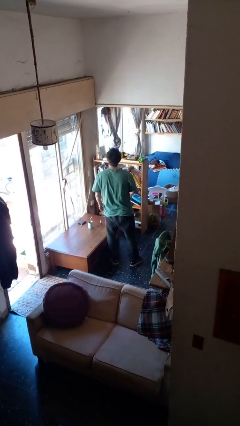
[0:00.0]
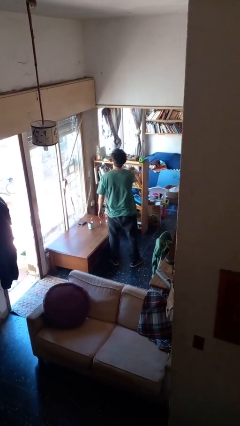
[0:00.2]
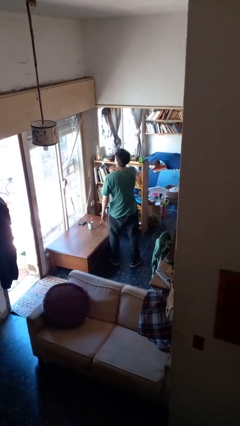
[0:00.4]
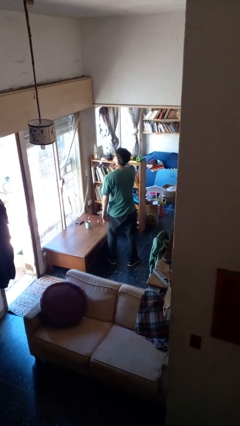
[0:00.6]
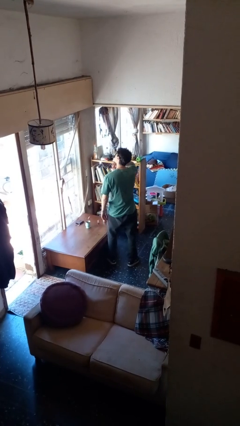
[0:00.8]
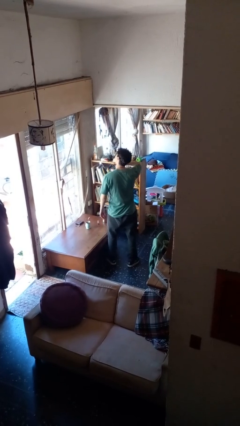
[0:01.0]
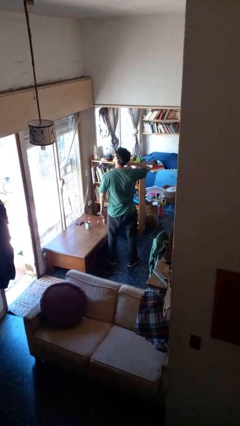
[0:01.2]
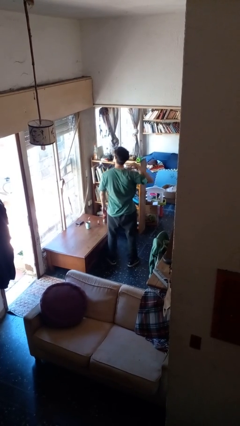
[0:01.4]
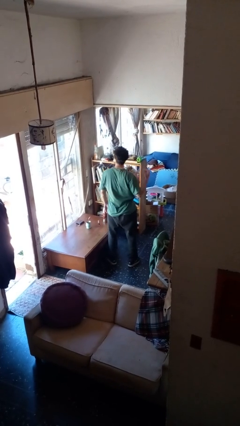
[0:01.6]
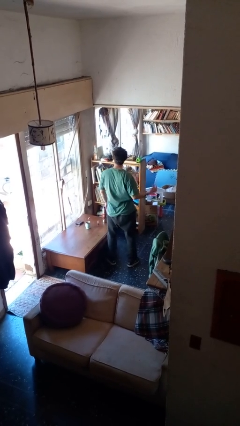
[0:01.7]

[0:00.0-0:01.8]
person gestures cut

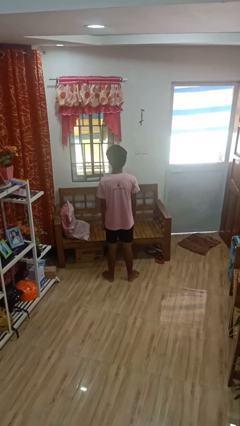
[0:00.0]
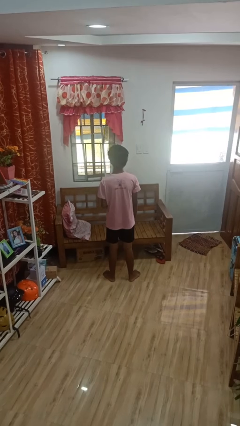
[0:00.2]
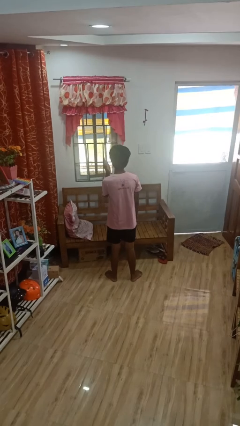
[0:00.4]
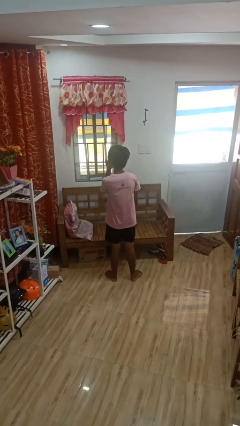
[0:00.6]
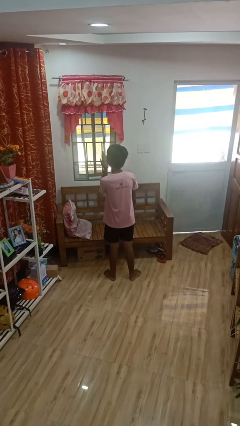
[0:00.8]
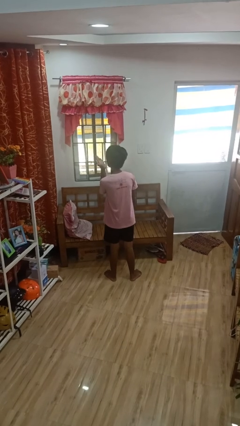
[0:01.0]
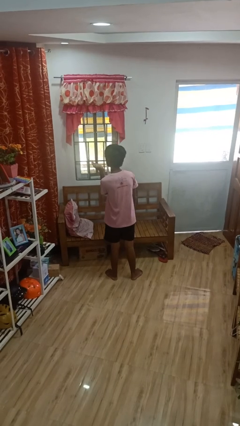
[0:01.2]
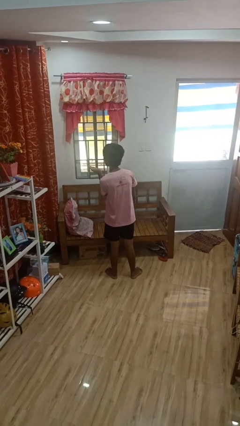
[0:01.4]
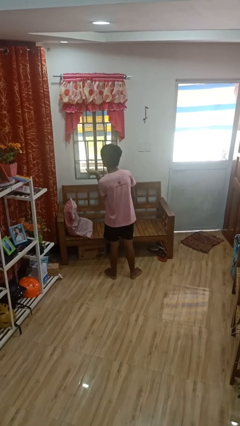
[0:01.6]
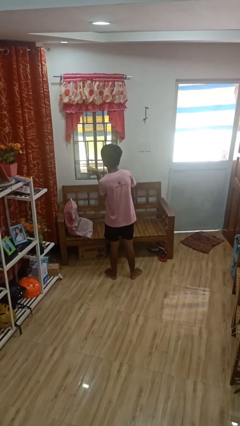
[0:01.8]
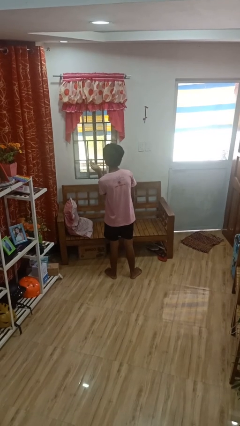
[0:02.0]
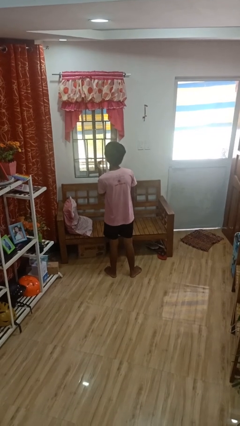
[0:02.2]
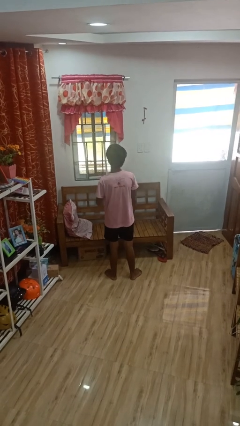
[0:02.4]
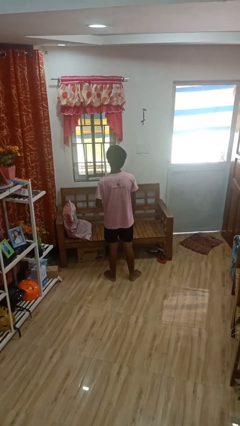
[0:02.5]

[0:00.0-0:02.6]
person gestures blow kiss

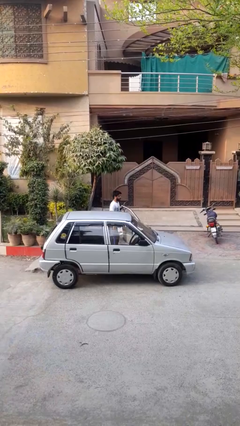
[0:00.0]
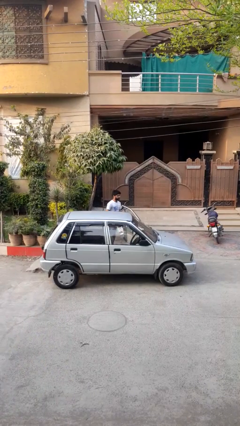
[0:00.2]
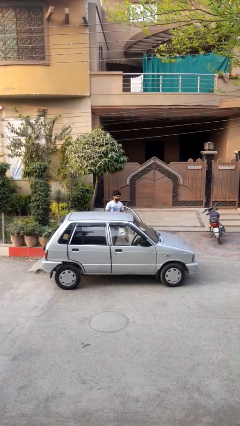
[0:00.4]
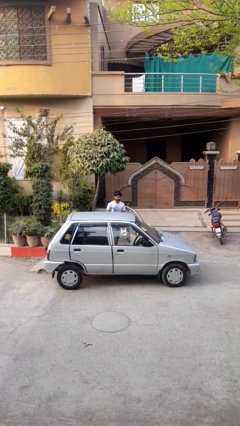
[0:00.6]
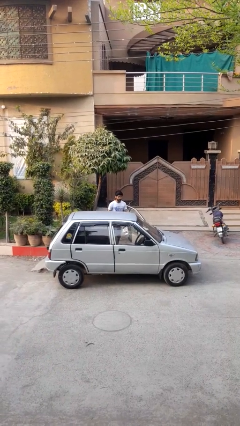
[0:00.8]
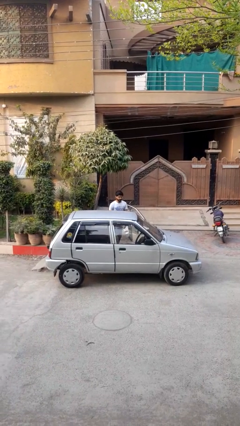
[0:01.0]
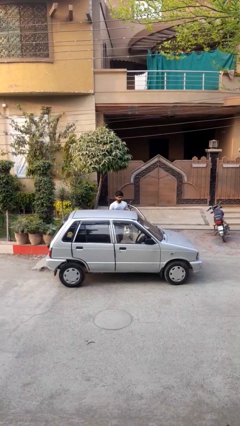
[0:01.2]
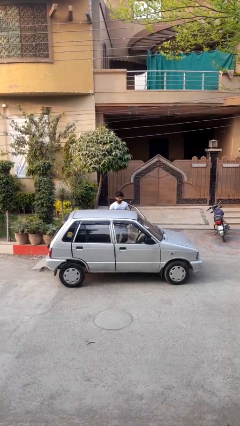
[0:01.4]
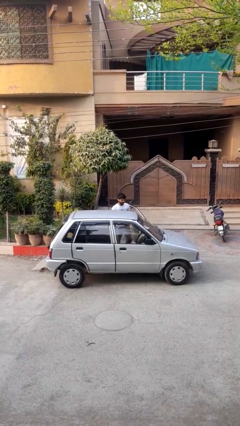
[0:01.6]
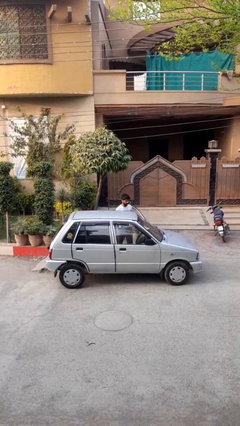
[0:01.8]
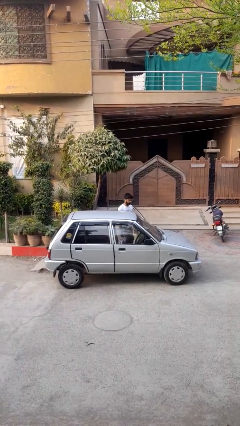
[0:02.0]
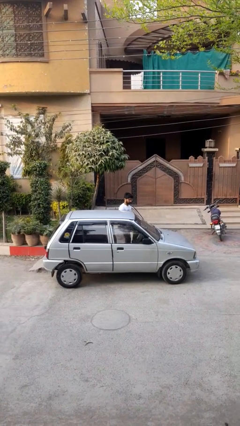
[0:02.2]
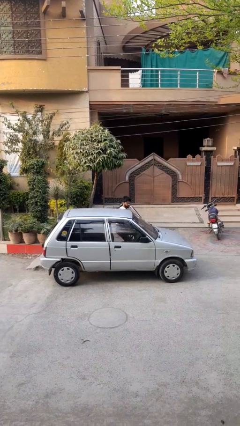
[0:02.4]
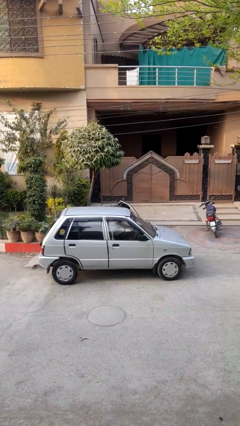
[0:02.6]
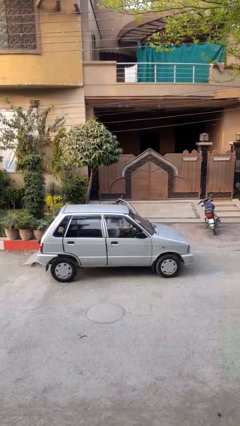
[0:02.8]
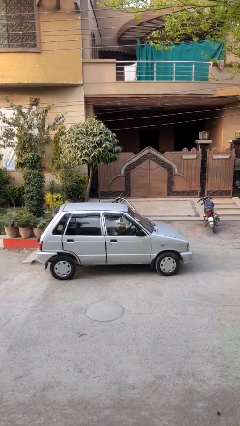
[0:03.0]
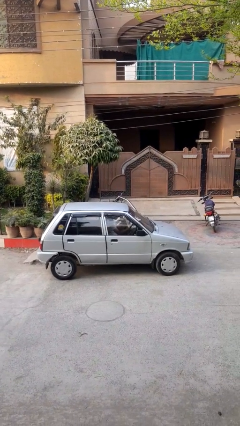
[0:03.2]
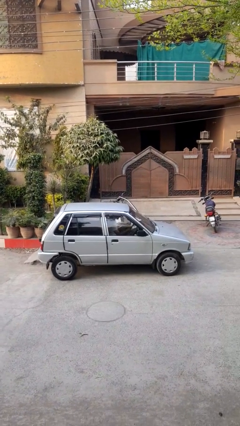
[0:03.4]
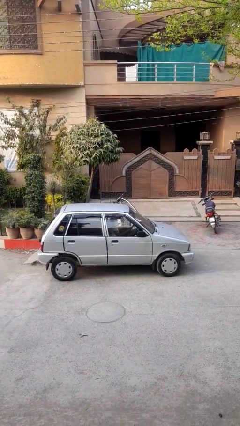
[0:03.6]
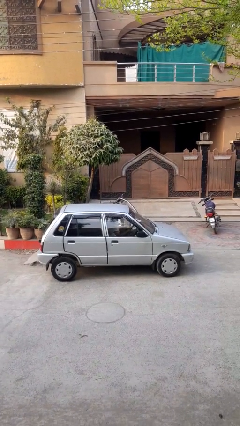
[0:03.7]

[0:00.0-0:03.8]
person enters car

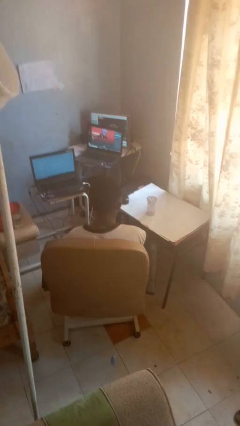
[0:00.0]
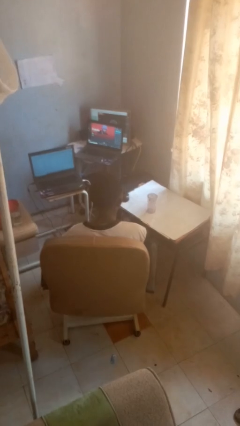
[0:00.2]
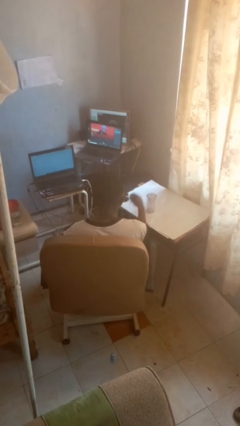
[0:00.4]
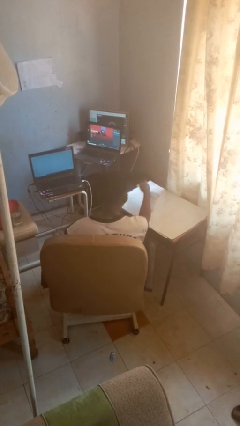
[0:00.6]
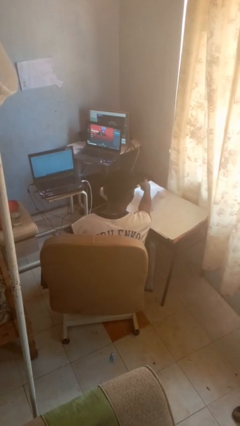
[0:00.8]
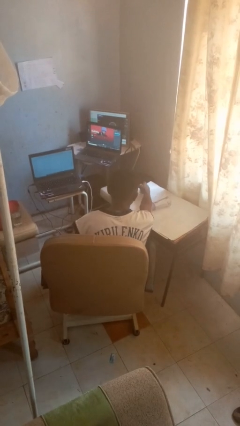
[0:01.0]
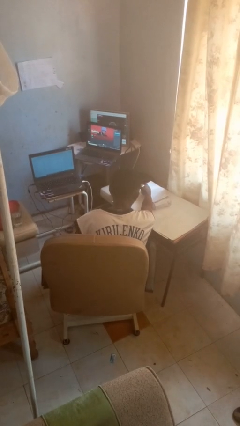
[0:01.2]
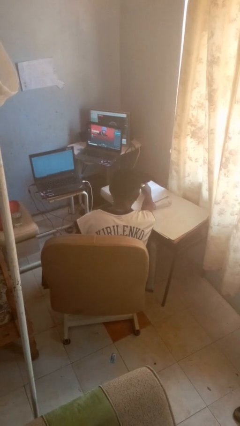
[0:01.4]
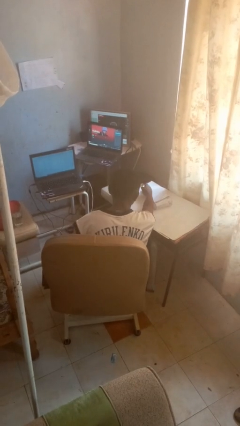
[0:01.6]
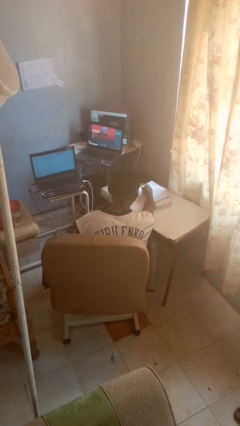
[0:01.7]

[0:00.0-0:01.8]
person knocks over glass

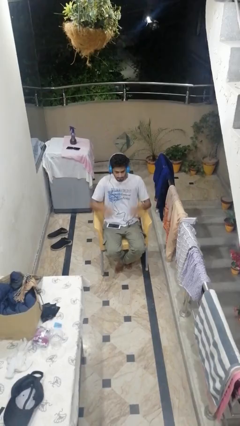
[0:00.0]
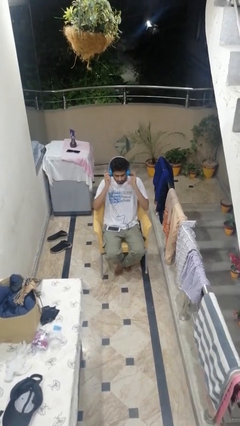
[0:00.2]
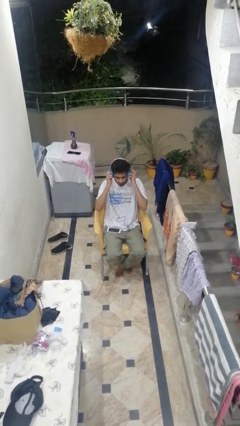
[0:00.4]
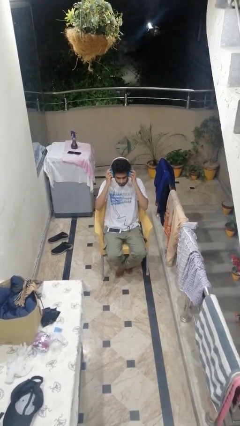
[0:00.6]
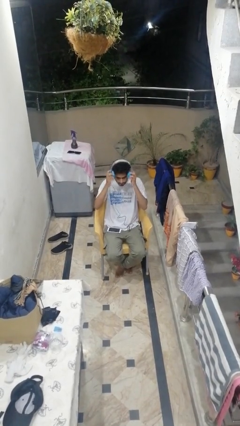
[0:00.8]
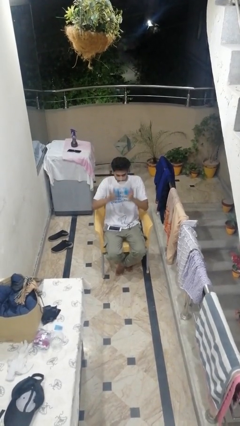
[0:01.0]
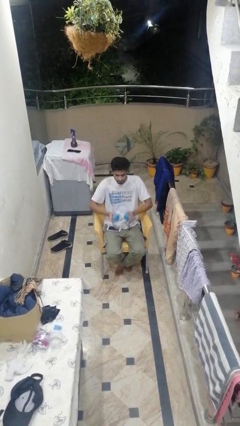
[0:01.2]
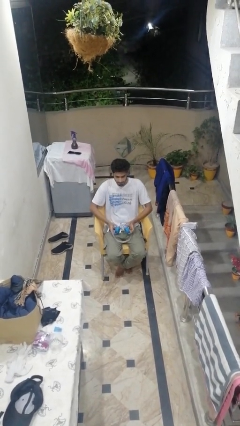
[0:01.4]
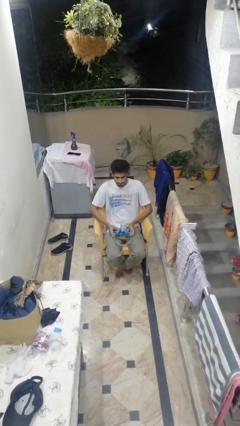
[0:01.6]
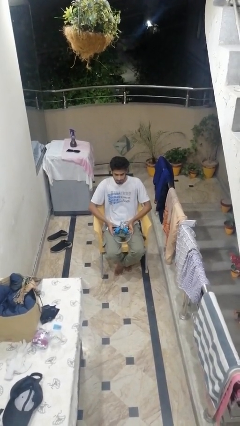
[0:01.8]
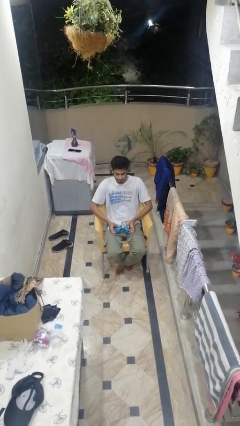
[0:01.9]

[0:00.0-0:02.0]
person takes off headphones

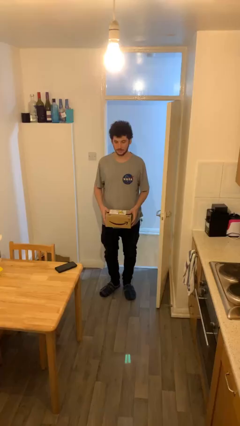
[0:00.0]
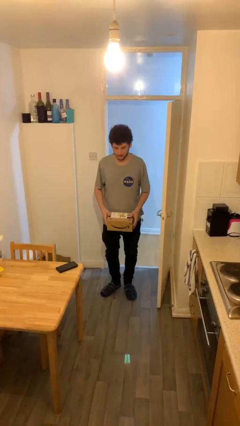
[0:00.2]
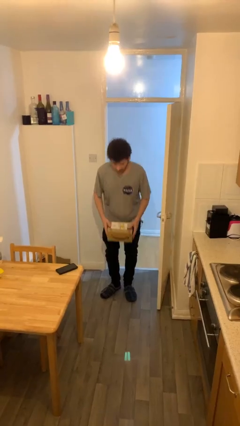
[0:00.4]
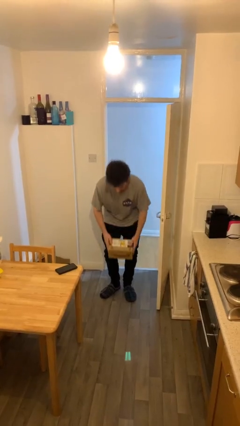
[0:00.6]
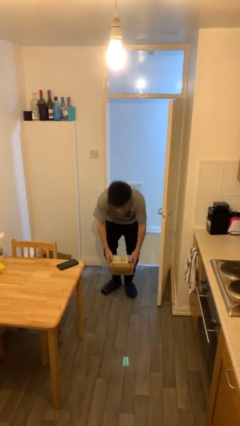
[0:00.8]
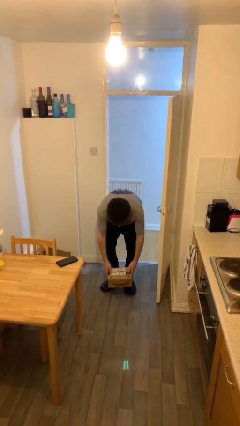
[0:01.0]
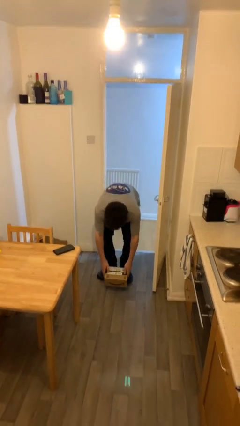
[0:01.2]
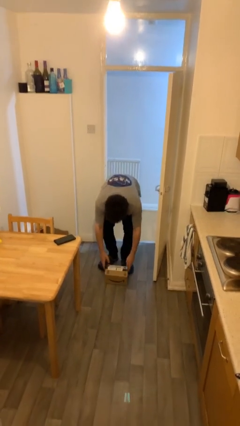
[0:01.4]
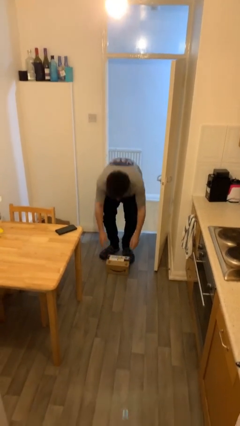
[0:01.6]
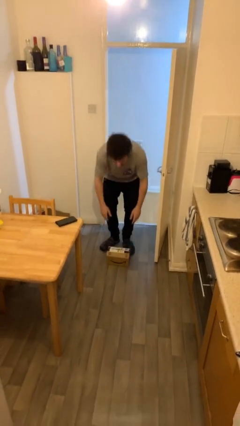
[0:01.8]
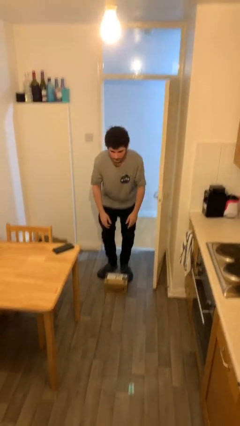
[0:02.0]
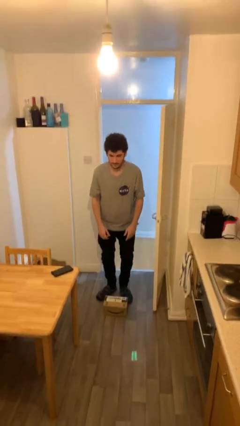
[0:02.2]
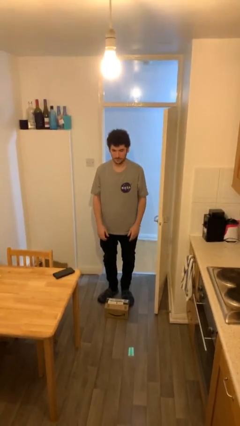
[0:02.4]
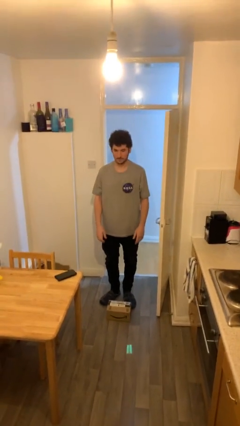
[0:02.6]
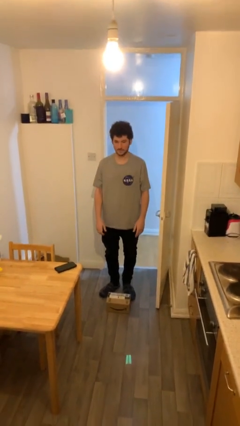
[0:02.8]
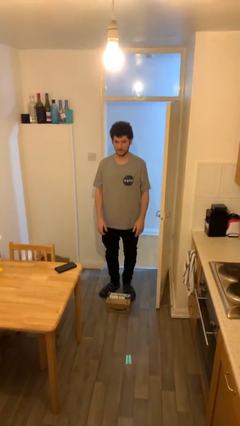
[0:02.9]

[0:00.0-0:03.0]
person puts down object on floor

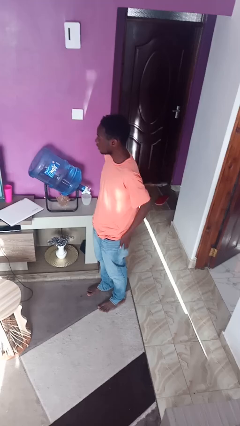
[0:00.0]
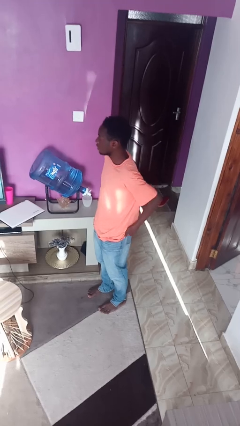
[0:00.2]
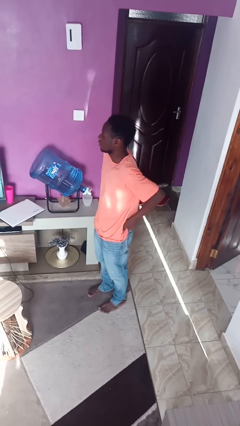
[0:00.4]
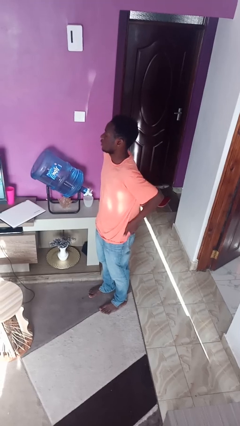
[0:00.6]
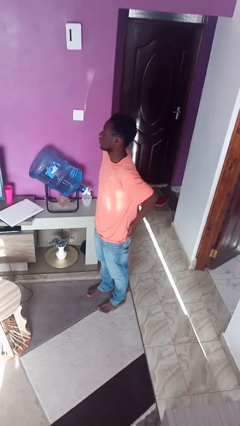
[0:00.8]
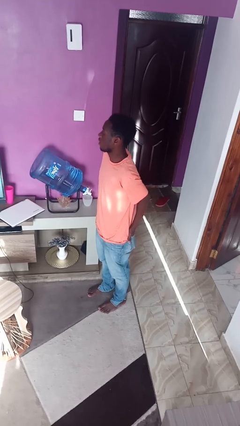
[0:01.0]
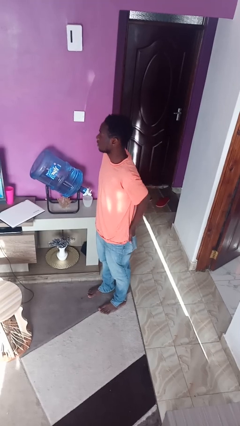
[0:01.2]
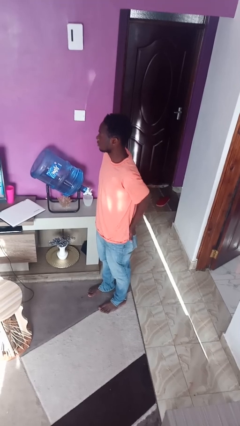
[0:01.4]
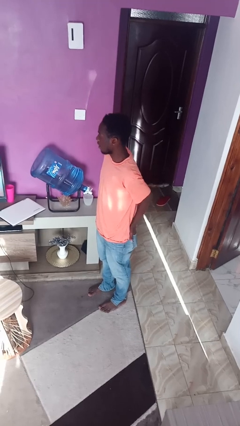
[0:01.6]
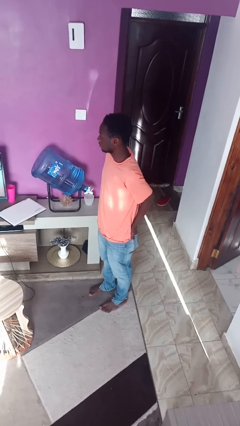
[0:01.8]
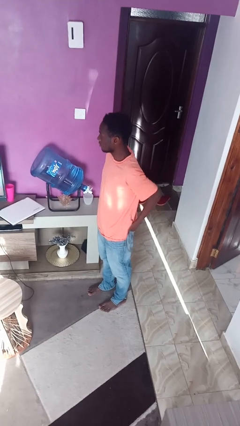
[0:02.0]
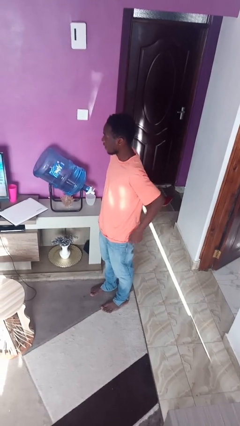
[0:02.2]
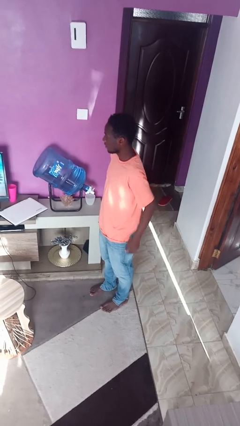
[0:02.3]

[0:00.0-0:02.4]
person puts hands in back pockets
